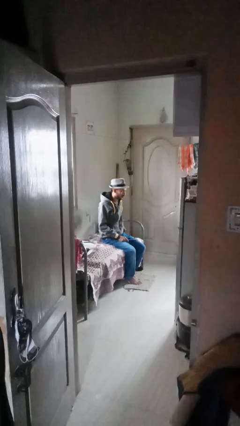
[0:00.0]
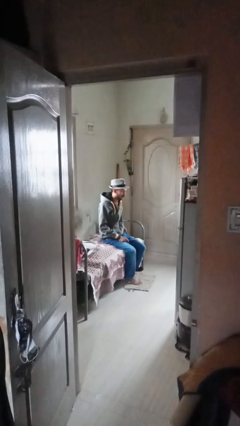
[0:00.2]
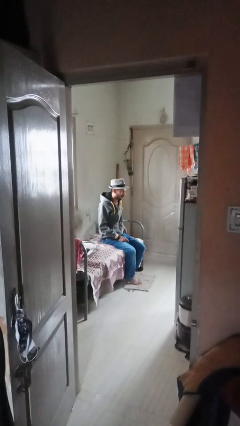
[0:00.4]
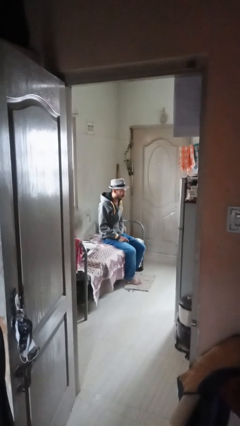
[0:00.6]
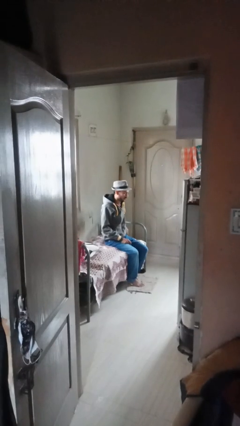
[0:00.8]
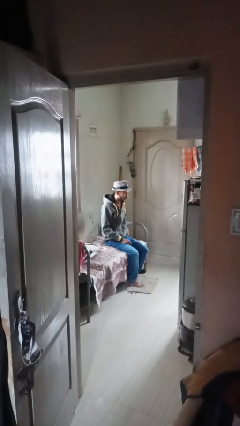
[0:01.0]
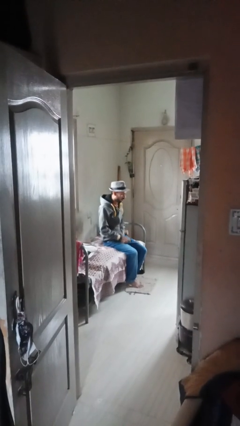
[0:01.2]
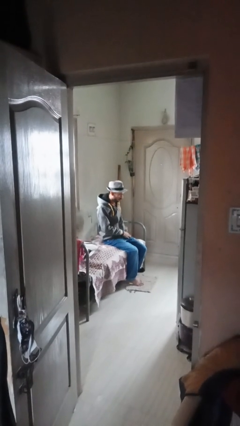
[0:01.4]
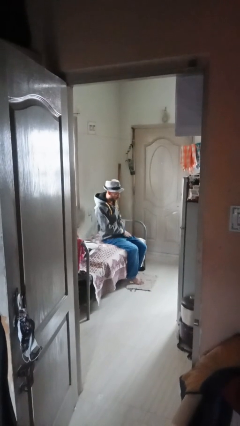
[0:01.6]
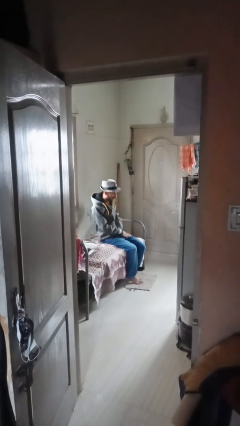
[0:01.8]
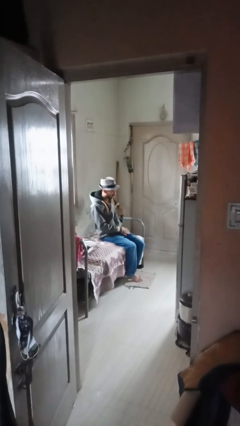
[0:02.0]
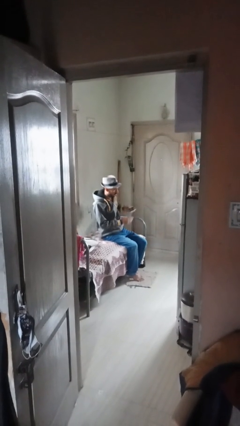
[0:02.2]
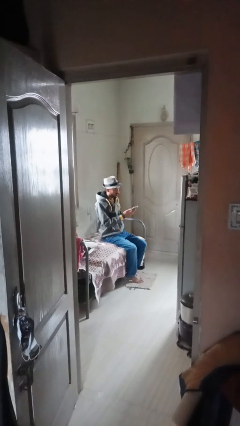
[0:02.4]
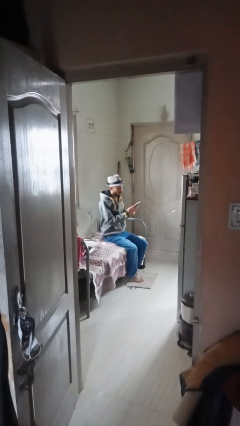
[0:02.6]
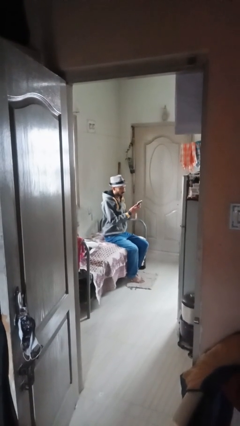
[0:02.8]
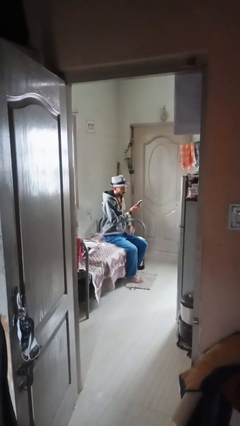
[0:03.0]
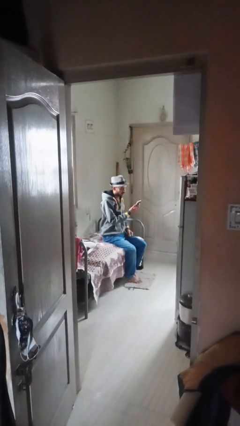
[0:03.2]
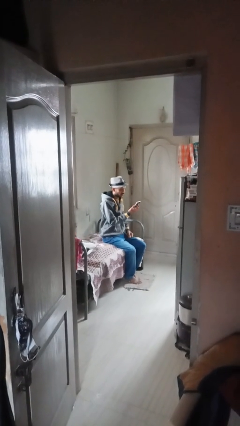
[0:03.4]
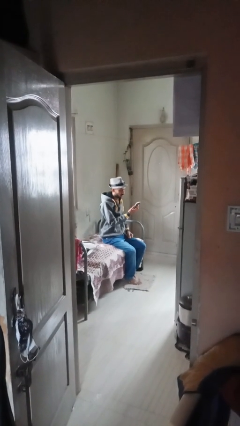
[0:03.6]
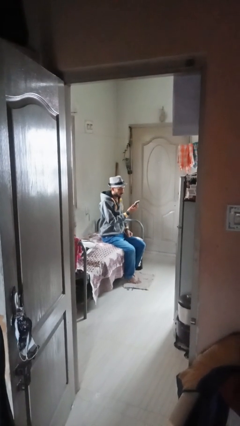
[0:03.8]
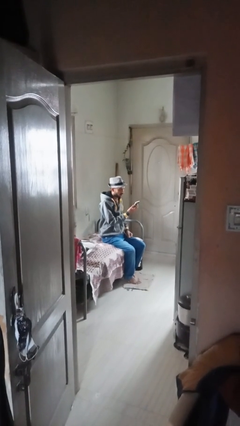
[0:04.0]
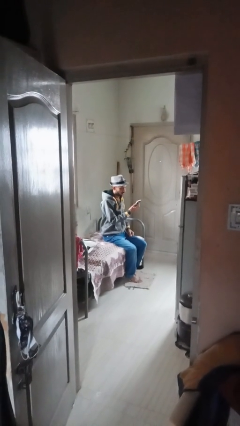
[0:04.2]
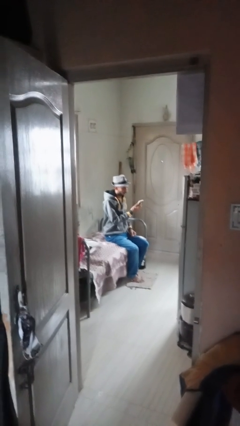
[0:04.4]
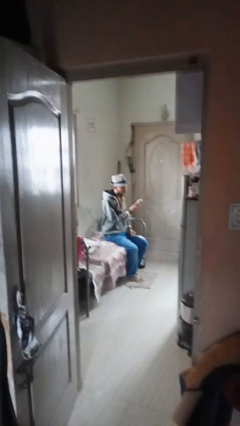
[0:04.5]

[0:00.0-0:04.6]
person takes phone from pocket

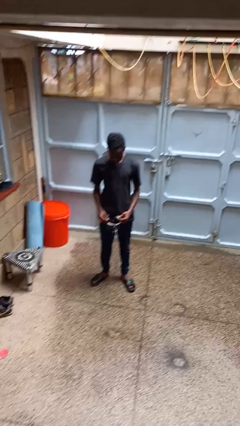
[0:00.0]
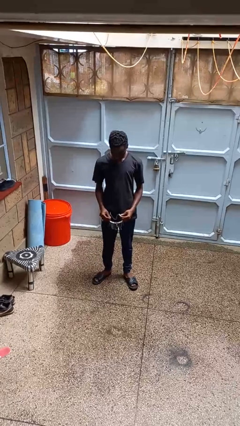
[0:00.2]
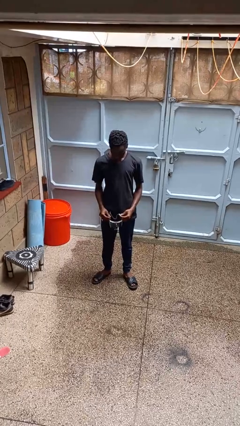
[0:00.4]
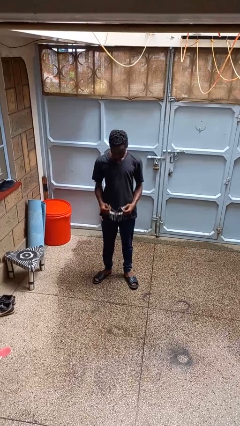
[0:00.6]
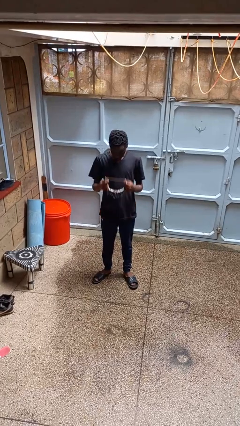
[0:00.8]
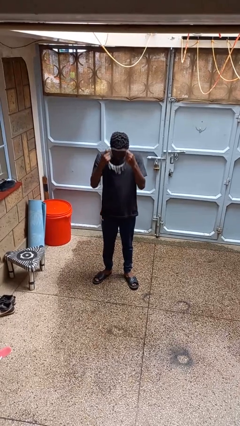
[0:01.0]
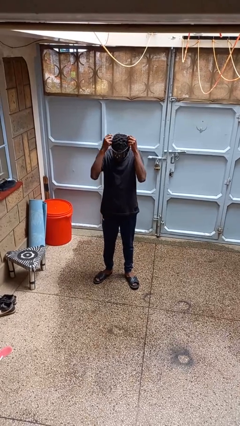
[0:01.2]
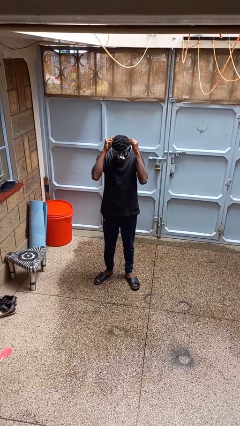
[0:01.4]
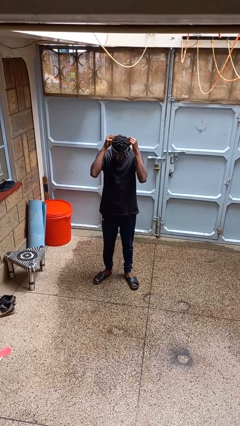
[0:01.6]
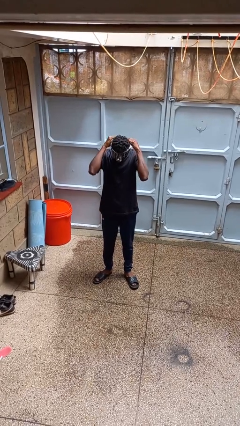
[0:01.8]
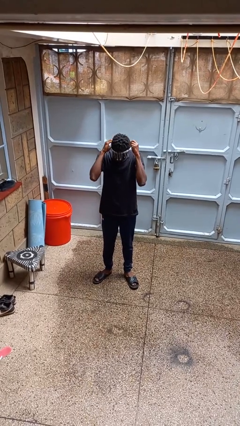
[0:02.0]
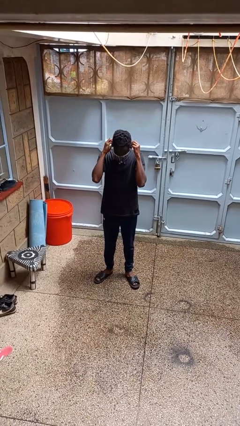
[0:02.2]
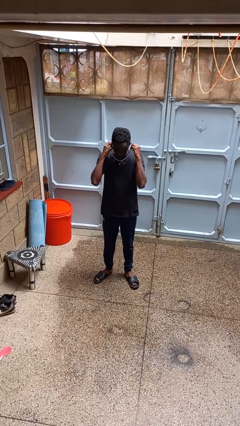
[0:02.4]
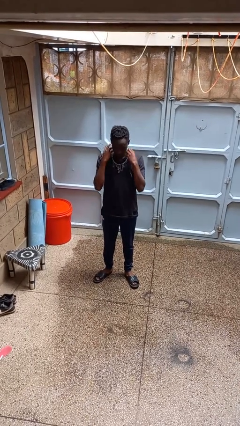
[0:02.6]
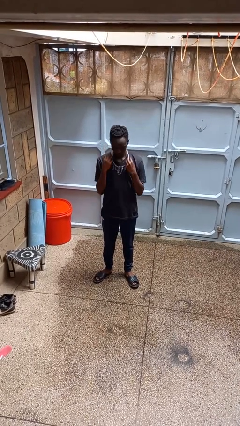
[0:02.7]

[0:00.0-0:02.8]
person puts on necklace

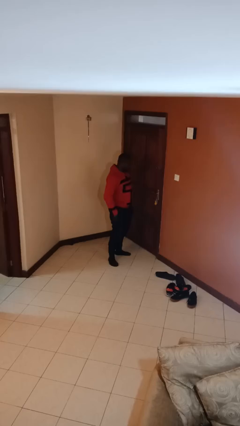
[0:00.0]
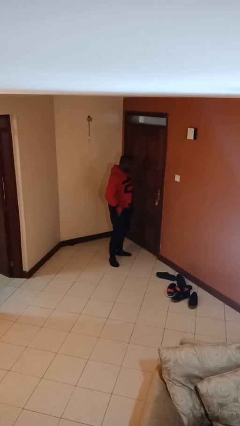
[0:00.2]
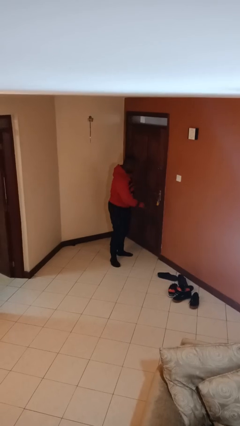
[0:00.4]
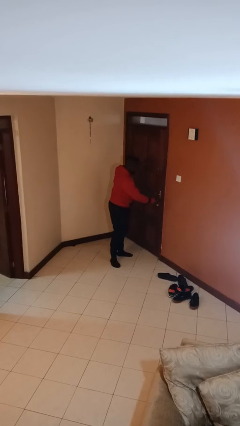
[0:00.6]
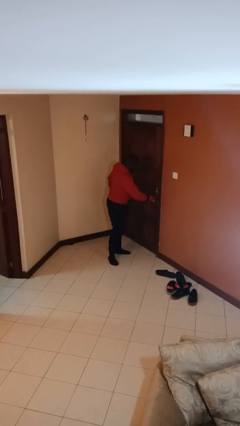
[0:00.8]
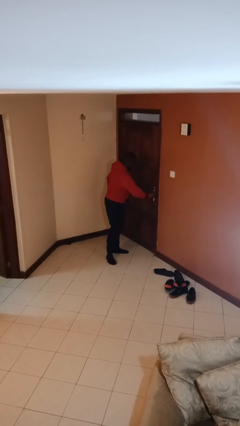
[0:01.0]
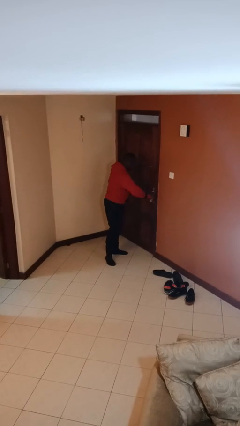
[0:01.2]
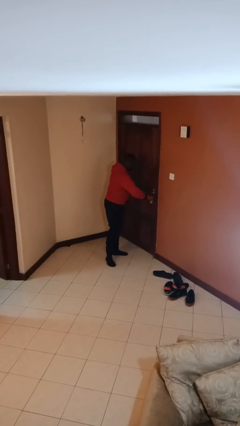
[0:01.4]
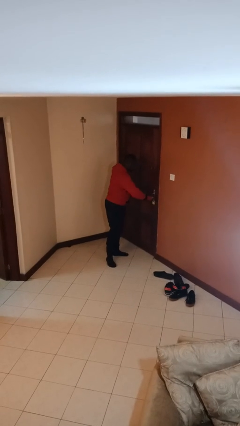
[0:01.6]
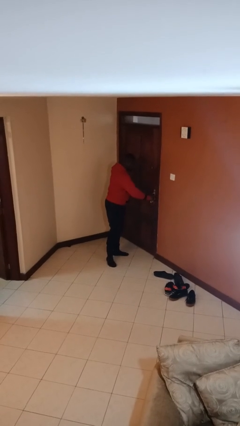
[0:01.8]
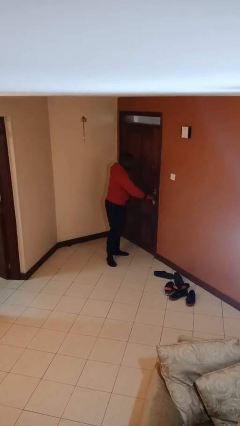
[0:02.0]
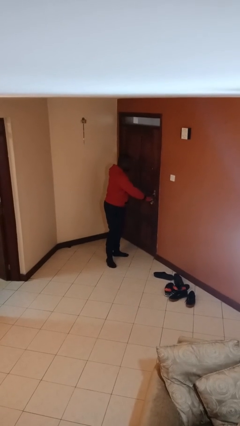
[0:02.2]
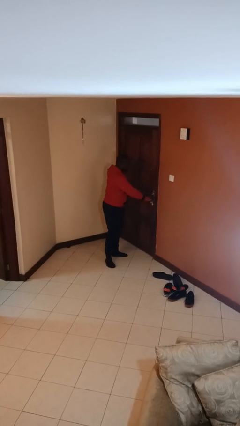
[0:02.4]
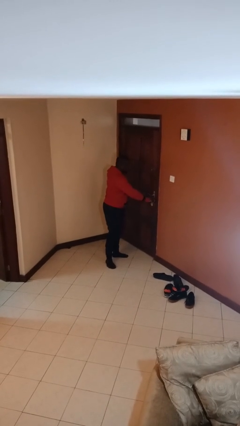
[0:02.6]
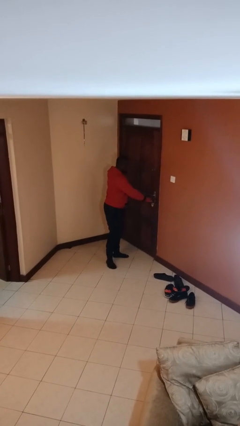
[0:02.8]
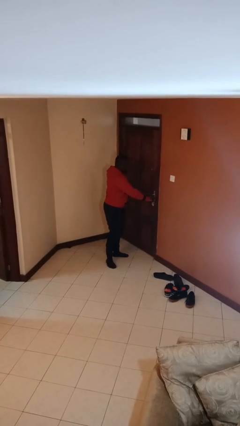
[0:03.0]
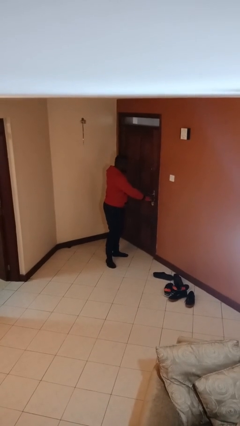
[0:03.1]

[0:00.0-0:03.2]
person unlocks door with keys

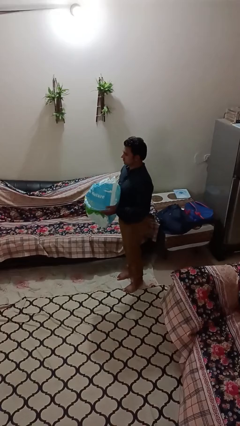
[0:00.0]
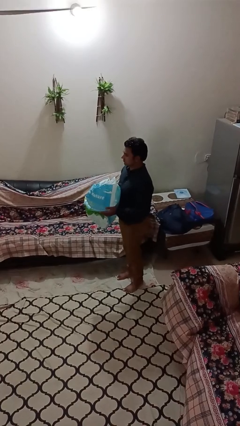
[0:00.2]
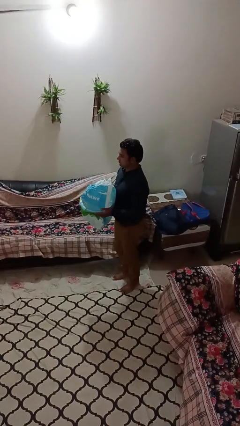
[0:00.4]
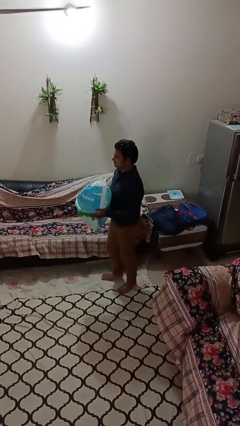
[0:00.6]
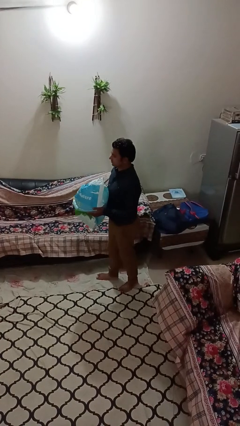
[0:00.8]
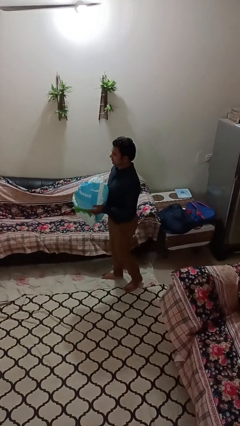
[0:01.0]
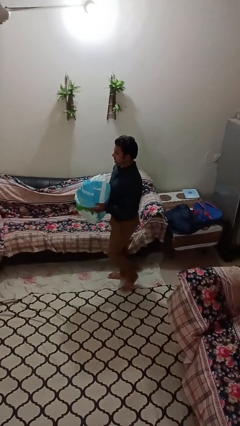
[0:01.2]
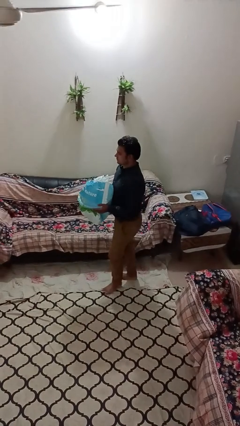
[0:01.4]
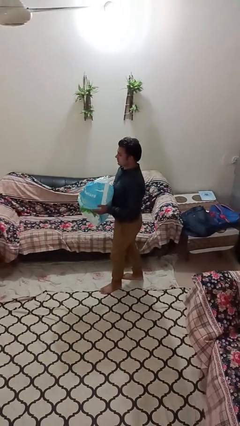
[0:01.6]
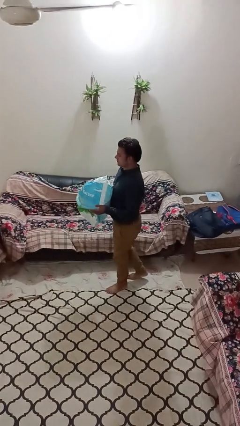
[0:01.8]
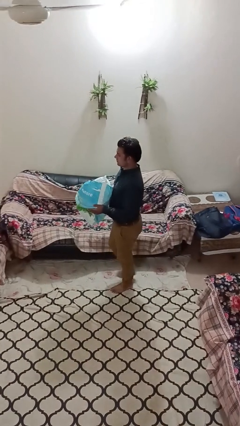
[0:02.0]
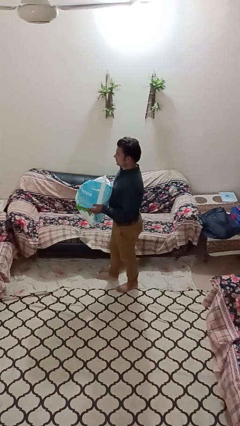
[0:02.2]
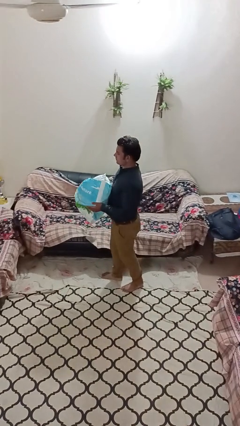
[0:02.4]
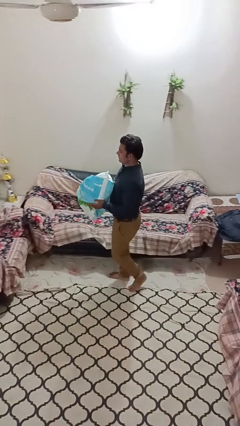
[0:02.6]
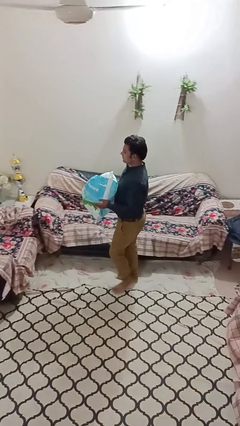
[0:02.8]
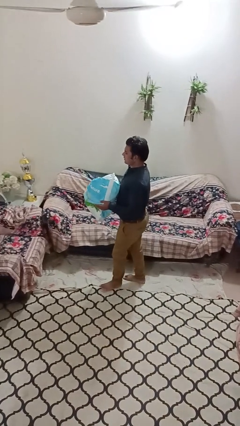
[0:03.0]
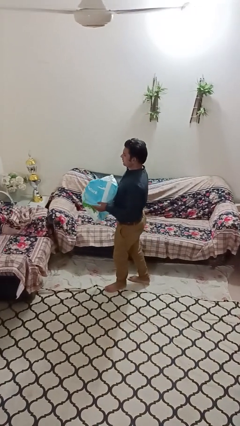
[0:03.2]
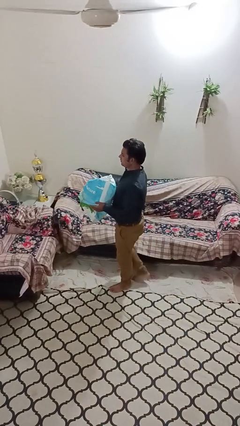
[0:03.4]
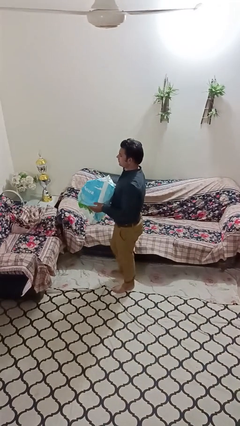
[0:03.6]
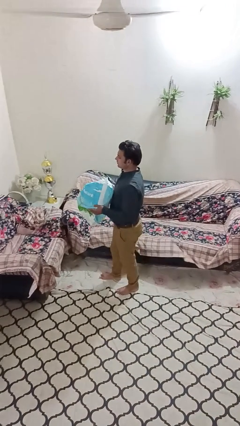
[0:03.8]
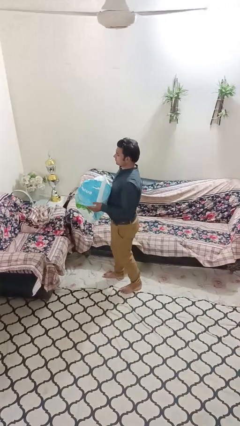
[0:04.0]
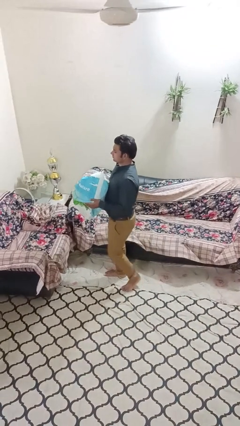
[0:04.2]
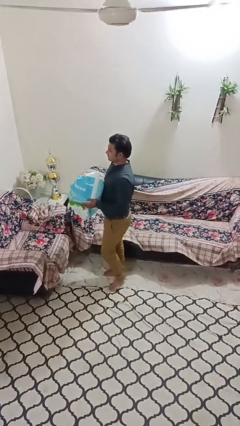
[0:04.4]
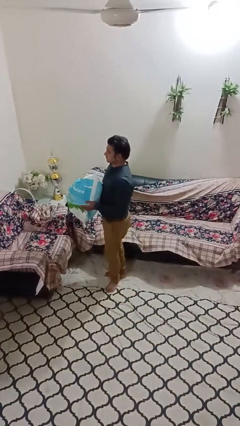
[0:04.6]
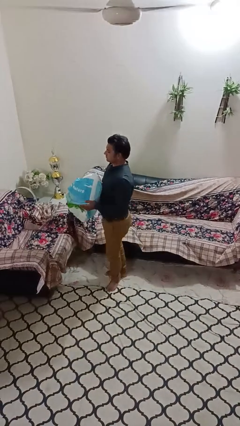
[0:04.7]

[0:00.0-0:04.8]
person carries groceries

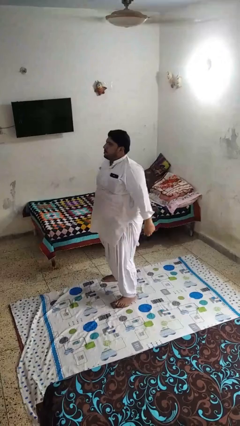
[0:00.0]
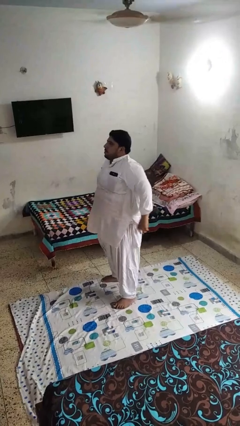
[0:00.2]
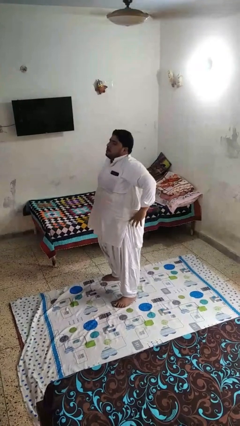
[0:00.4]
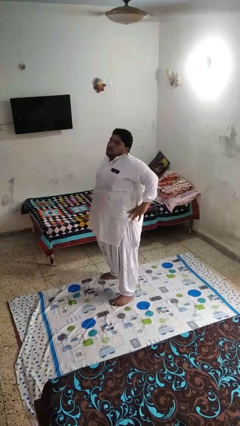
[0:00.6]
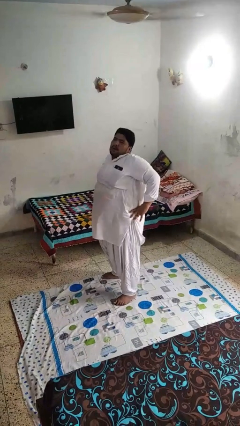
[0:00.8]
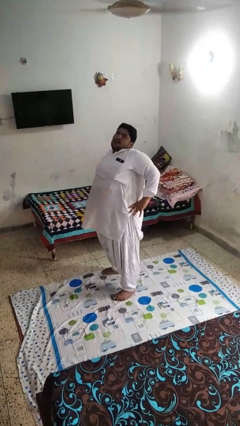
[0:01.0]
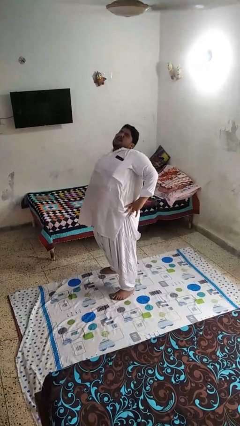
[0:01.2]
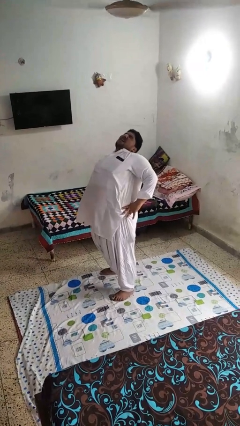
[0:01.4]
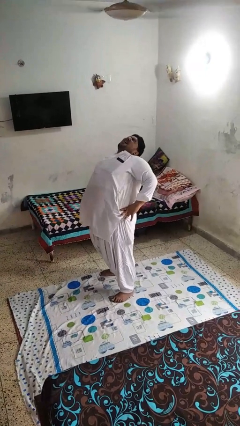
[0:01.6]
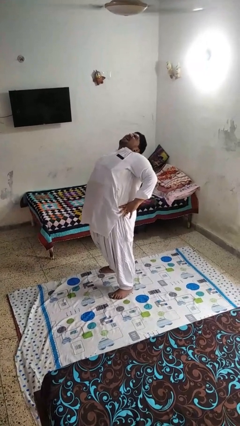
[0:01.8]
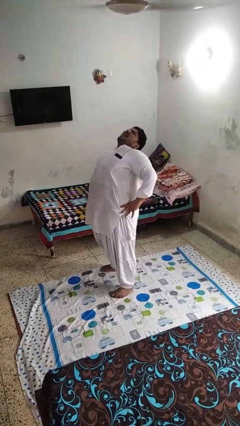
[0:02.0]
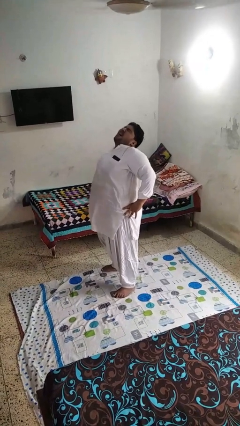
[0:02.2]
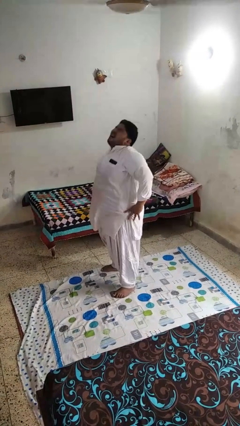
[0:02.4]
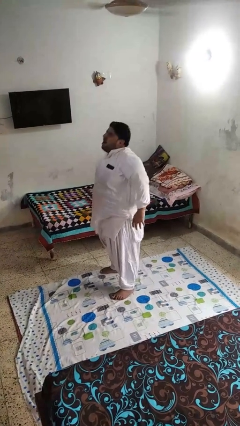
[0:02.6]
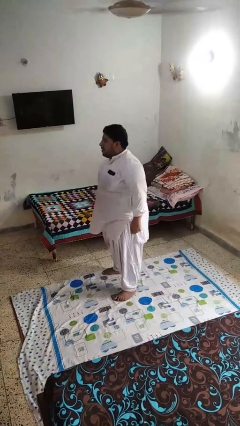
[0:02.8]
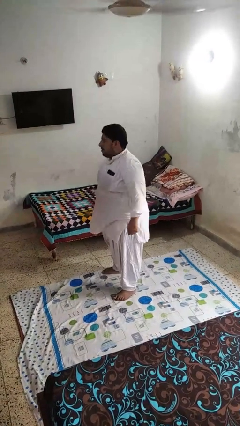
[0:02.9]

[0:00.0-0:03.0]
person stretches back
